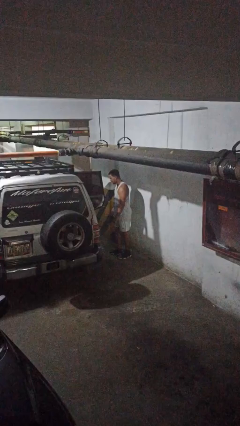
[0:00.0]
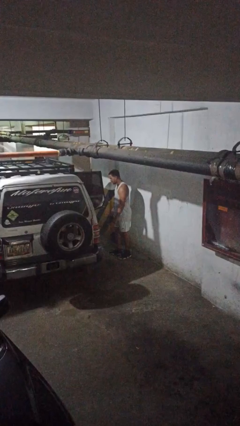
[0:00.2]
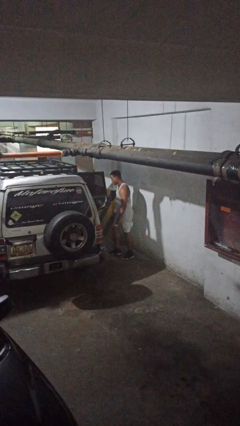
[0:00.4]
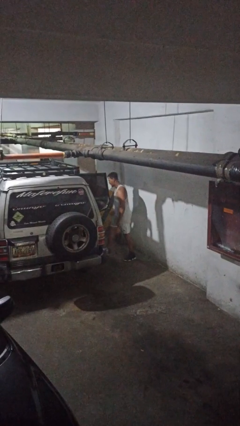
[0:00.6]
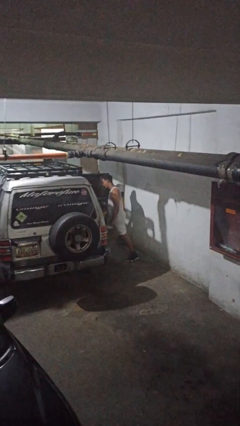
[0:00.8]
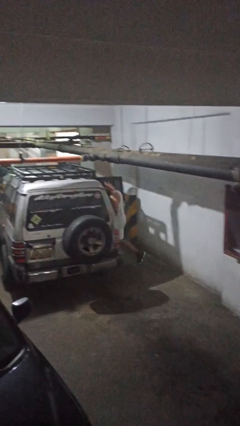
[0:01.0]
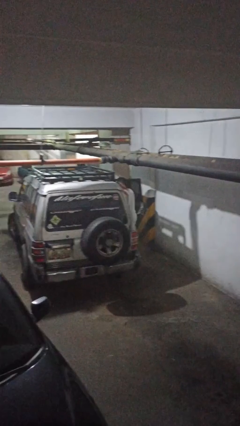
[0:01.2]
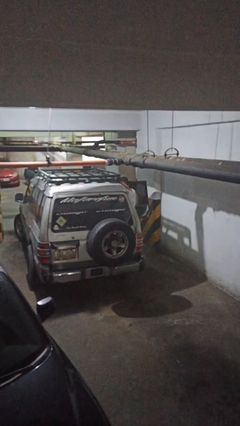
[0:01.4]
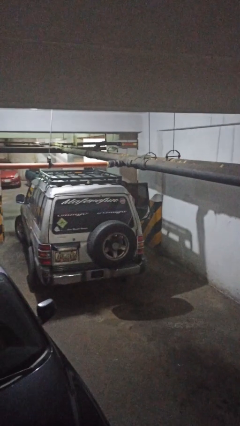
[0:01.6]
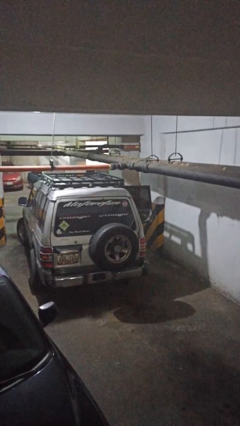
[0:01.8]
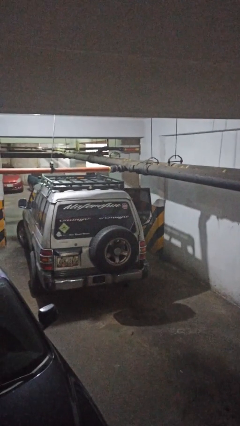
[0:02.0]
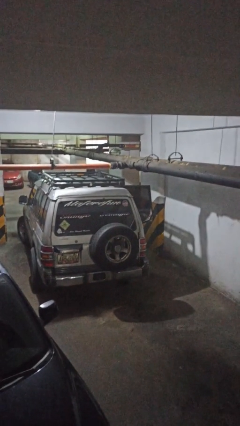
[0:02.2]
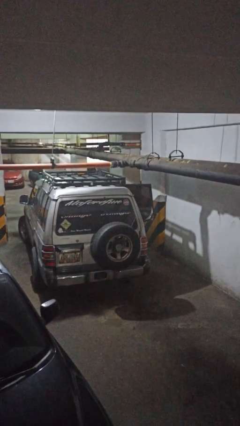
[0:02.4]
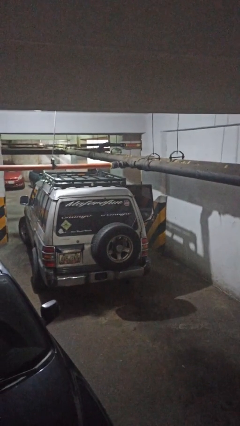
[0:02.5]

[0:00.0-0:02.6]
person enters car

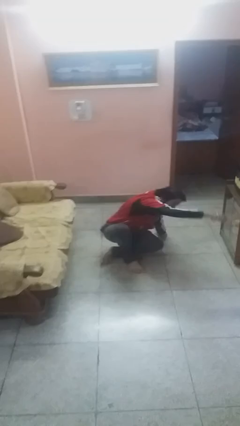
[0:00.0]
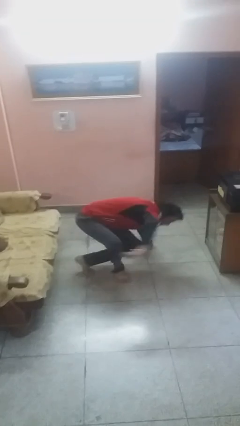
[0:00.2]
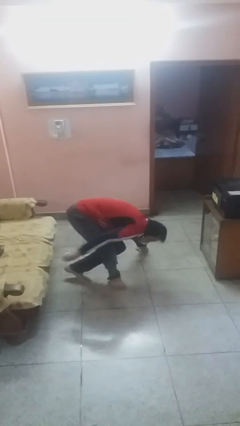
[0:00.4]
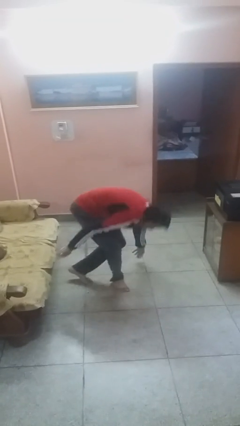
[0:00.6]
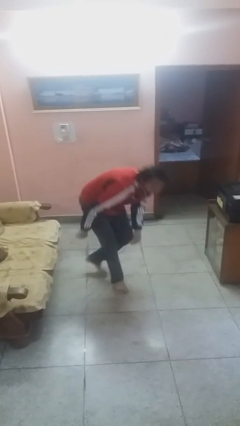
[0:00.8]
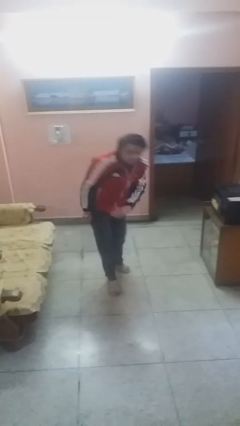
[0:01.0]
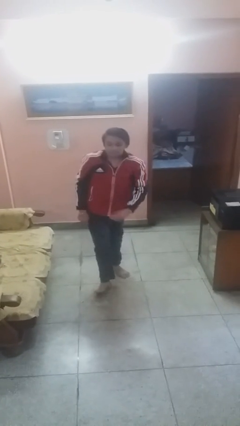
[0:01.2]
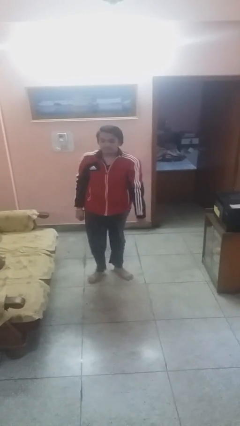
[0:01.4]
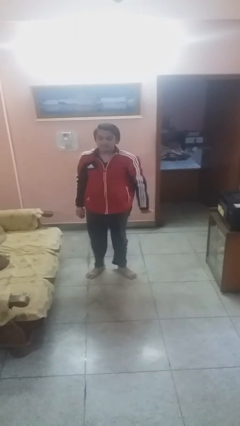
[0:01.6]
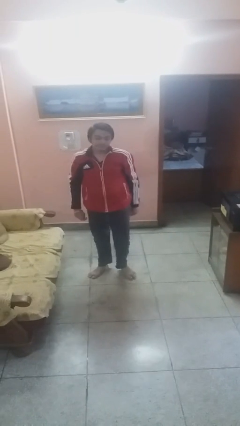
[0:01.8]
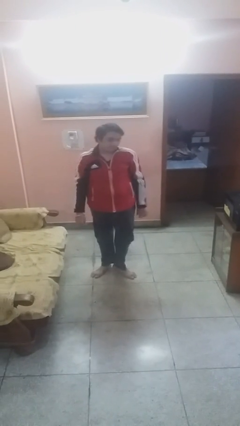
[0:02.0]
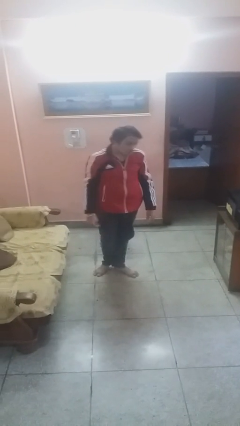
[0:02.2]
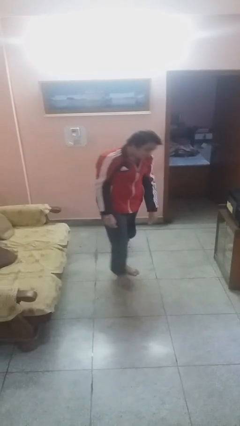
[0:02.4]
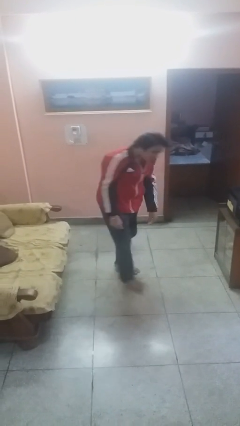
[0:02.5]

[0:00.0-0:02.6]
person stands up

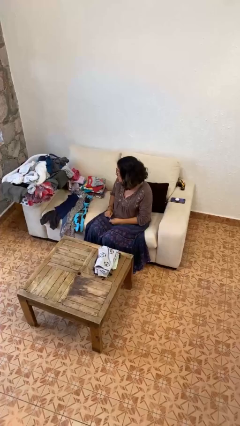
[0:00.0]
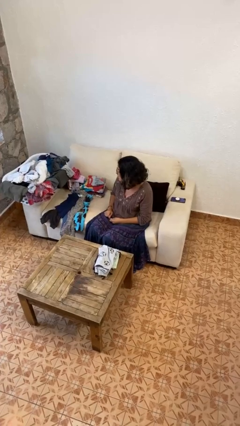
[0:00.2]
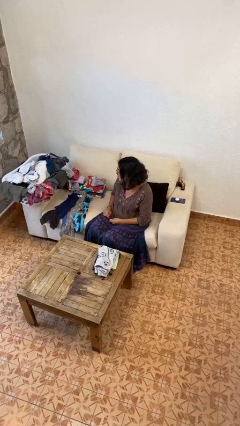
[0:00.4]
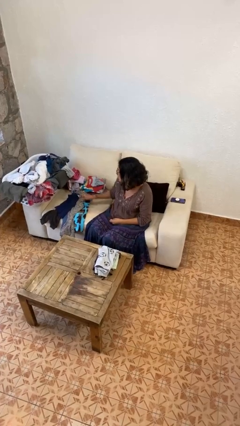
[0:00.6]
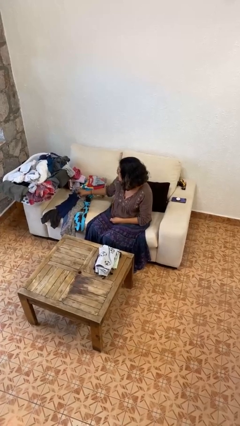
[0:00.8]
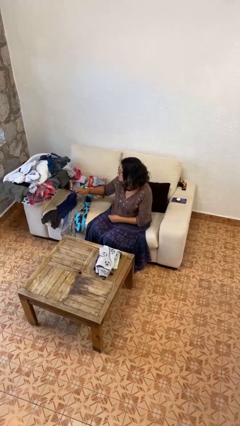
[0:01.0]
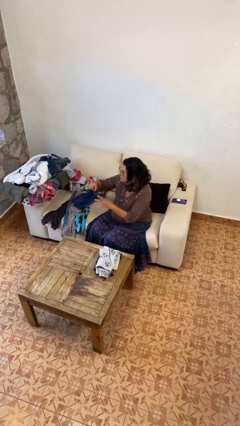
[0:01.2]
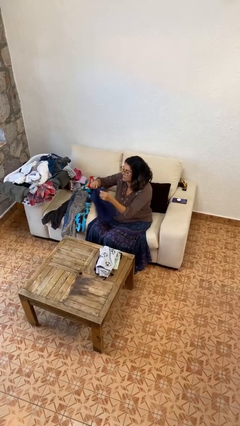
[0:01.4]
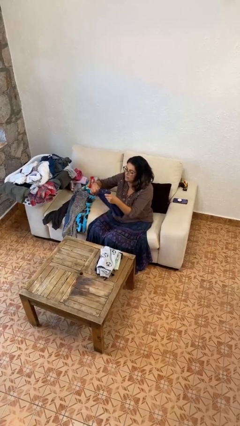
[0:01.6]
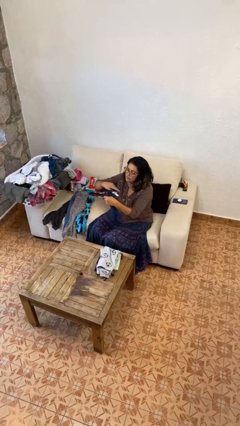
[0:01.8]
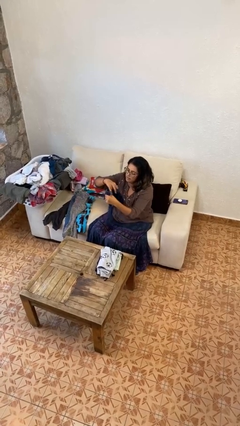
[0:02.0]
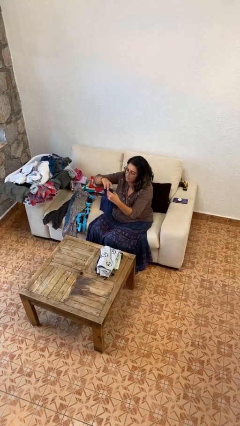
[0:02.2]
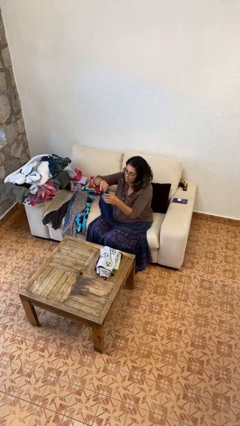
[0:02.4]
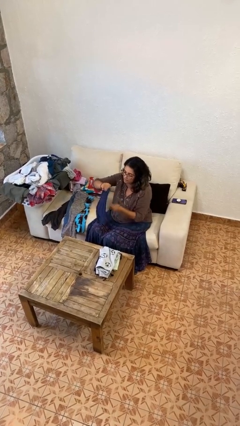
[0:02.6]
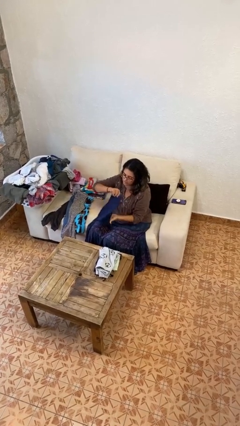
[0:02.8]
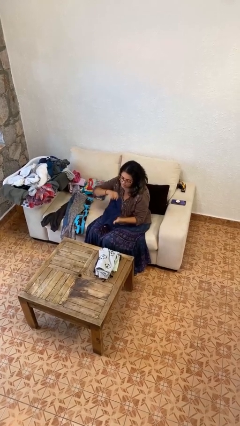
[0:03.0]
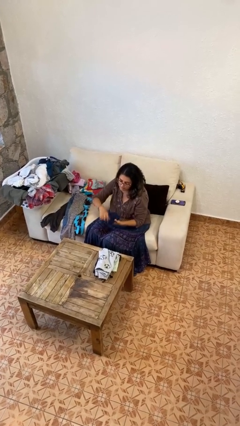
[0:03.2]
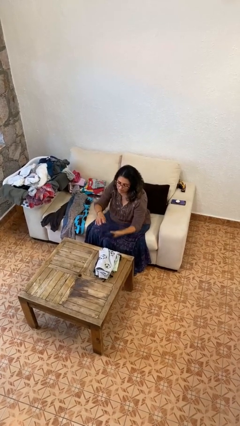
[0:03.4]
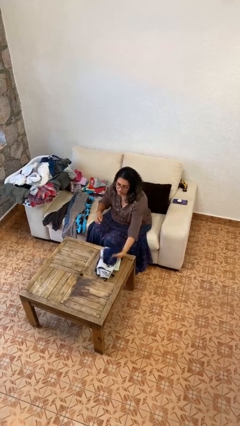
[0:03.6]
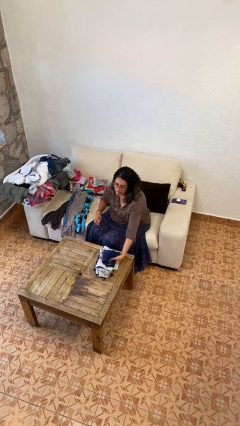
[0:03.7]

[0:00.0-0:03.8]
person folds pants

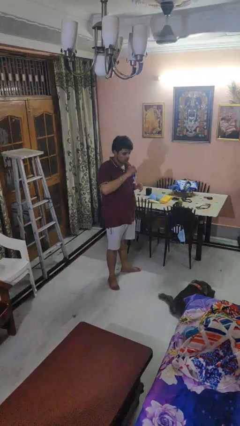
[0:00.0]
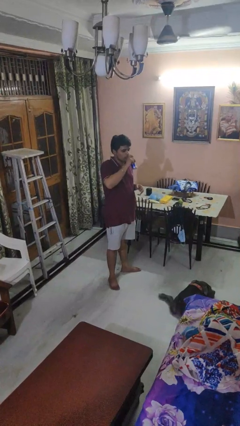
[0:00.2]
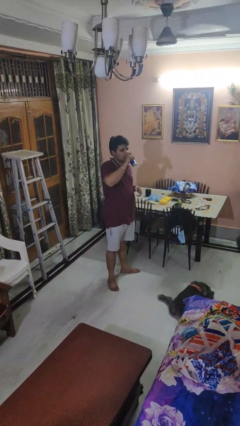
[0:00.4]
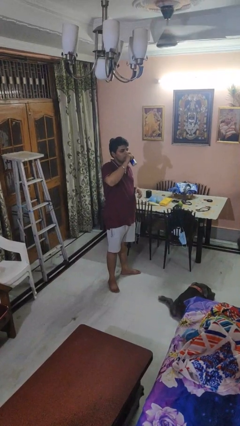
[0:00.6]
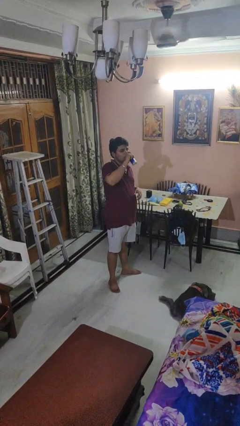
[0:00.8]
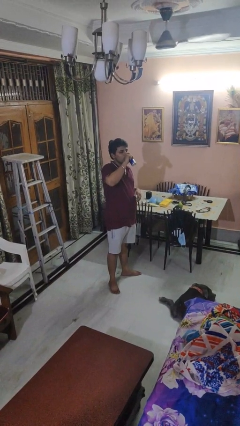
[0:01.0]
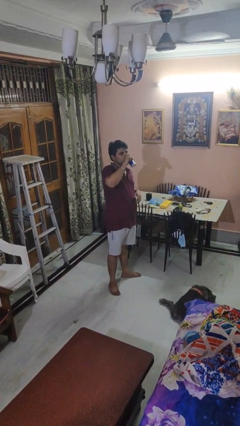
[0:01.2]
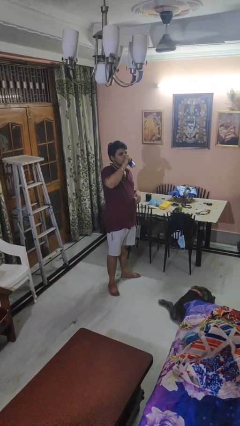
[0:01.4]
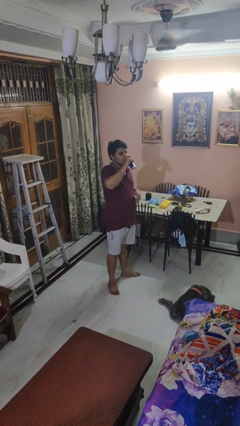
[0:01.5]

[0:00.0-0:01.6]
person drinks from beverage can

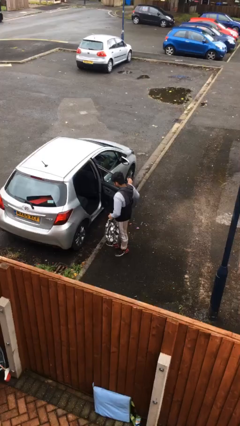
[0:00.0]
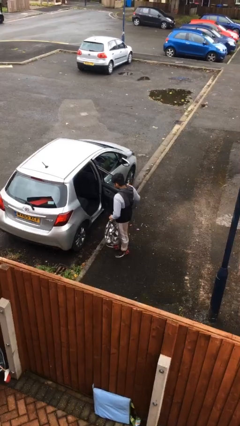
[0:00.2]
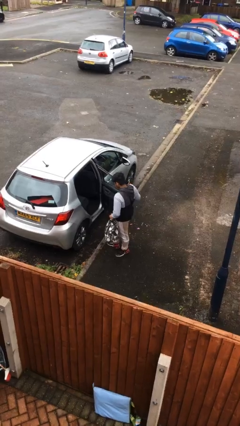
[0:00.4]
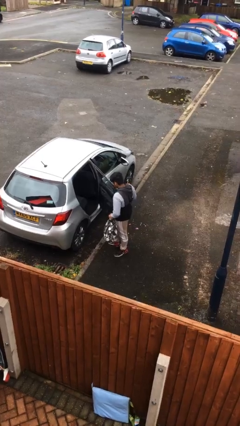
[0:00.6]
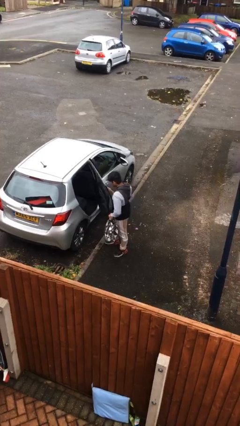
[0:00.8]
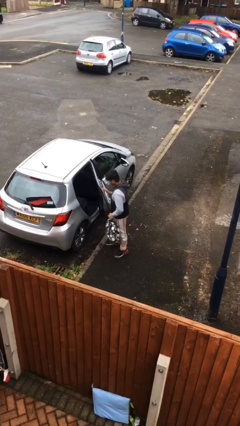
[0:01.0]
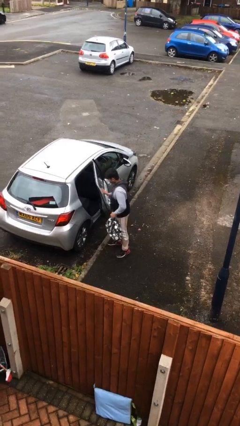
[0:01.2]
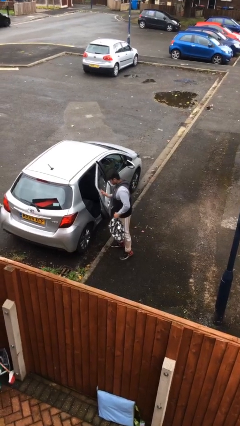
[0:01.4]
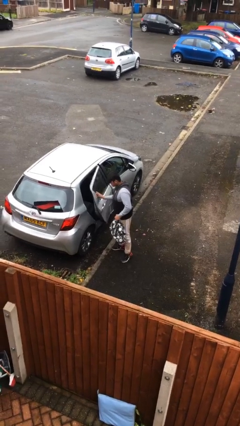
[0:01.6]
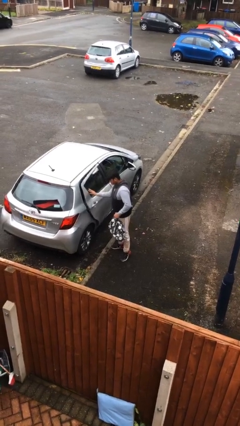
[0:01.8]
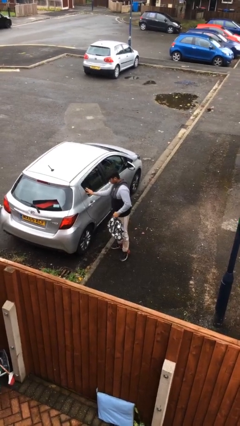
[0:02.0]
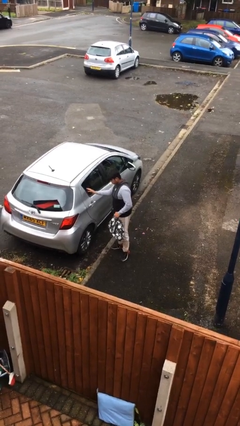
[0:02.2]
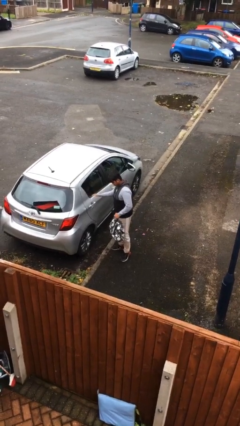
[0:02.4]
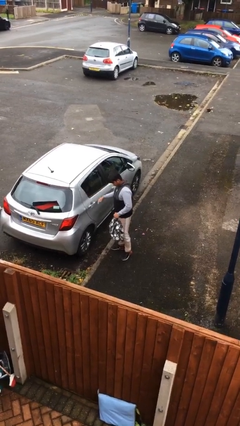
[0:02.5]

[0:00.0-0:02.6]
person closes car door

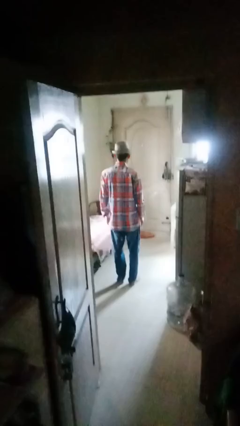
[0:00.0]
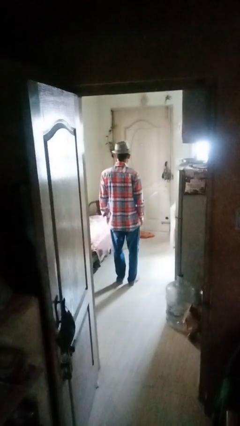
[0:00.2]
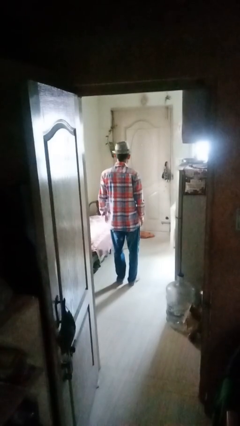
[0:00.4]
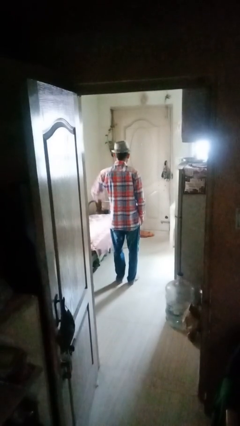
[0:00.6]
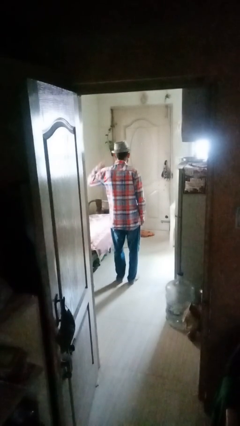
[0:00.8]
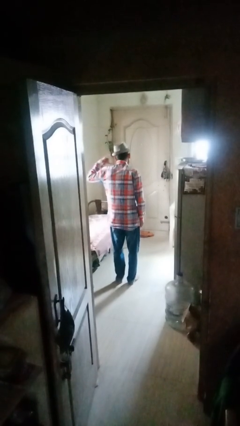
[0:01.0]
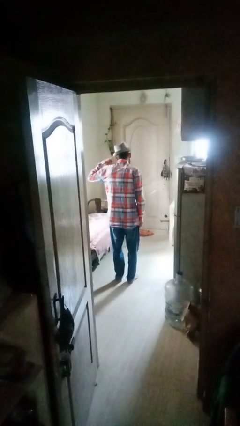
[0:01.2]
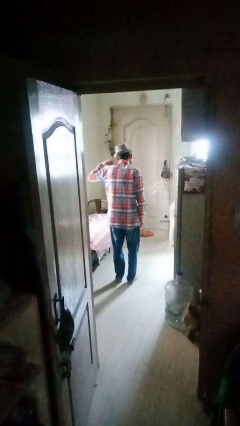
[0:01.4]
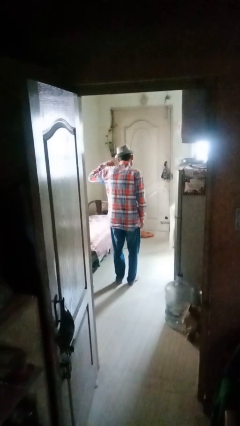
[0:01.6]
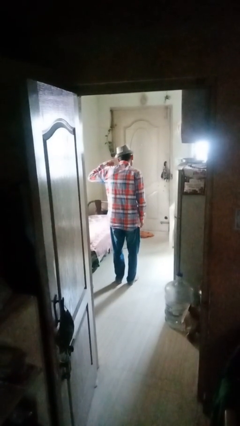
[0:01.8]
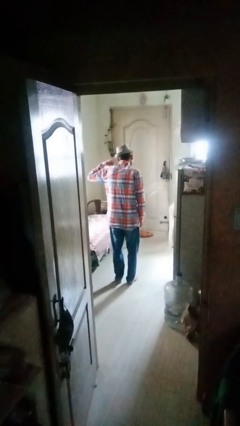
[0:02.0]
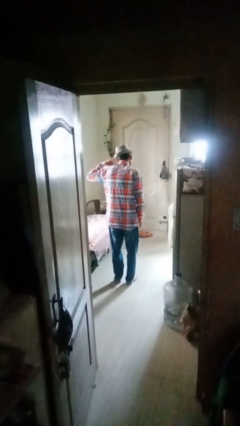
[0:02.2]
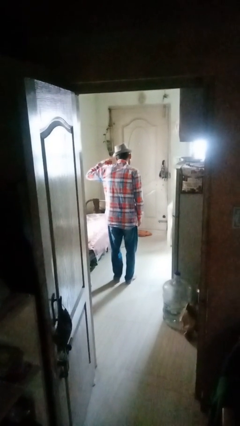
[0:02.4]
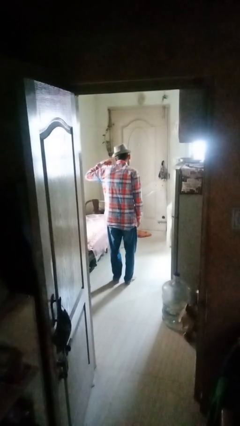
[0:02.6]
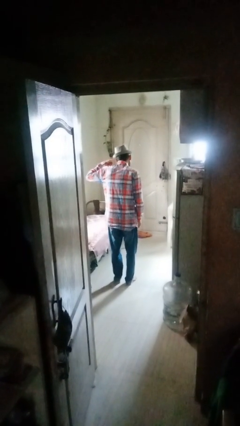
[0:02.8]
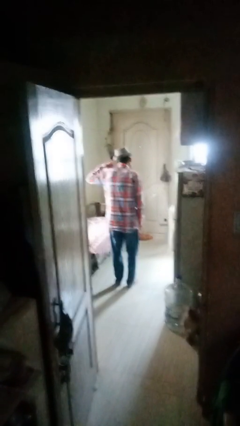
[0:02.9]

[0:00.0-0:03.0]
person gestures call me

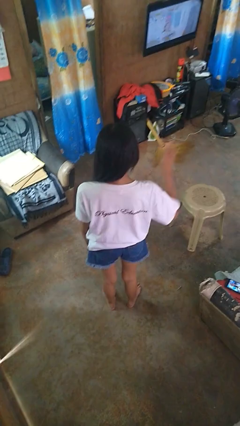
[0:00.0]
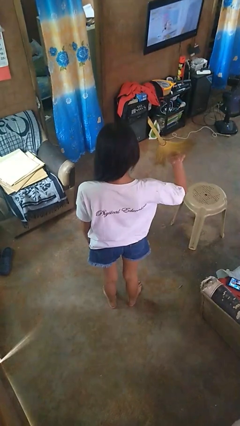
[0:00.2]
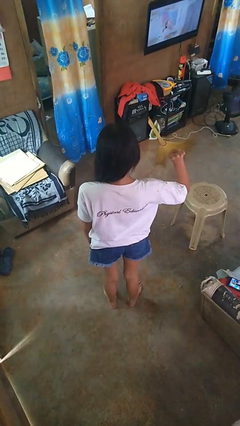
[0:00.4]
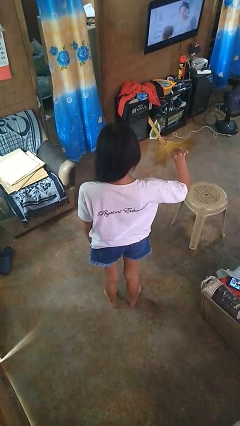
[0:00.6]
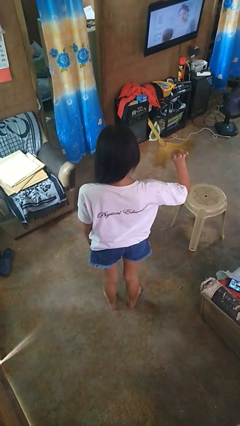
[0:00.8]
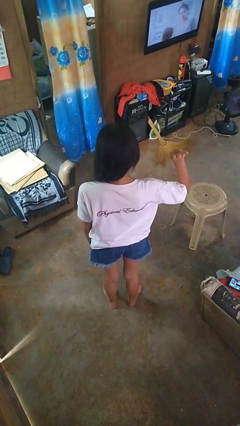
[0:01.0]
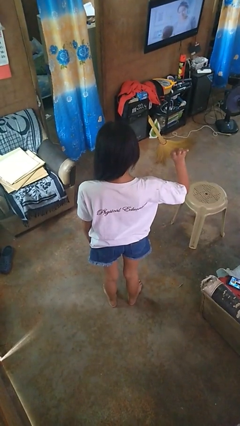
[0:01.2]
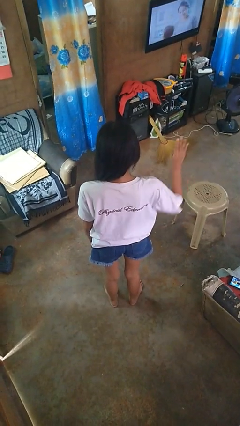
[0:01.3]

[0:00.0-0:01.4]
person gestures number four
